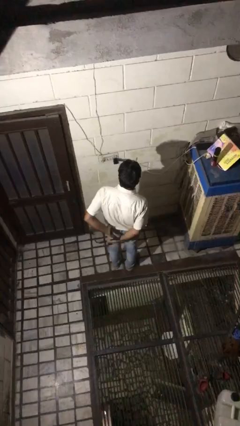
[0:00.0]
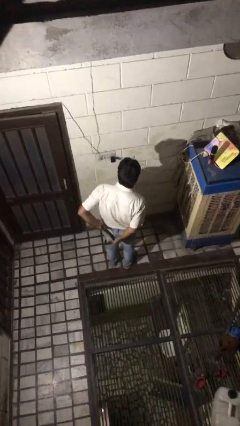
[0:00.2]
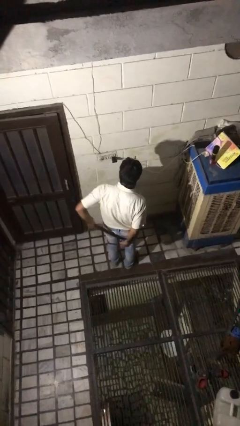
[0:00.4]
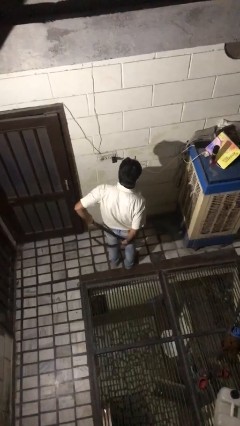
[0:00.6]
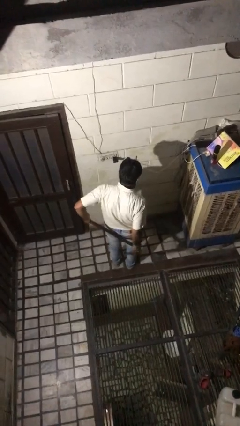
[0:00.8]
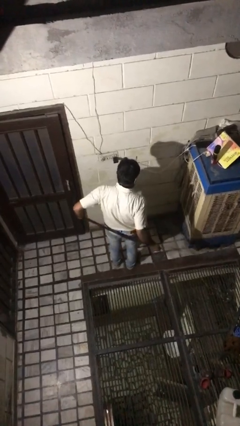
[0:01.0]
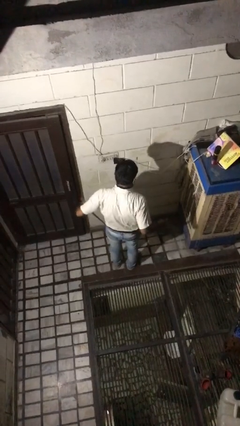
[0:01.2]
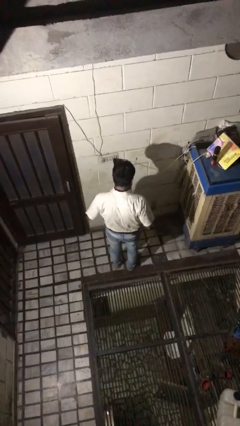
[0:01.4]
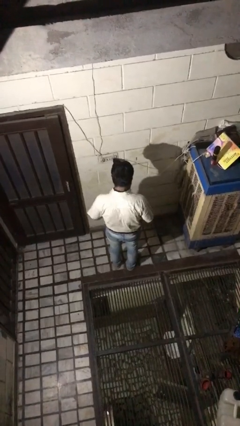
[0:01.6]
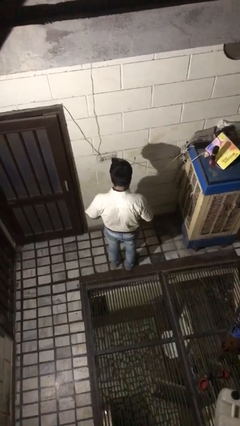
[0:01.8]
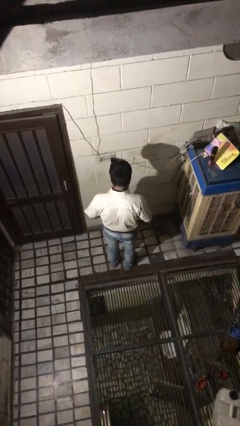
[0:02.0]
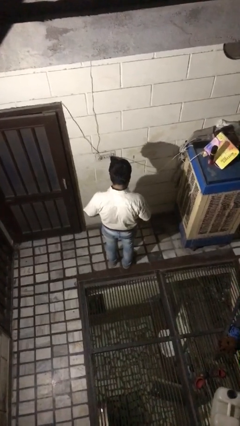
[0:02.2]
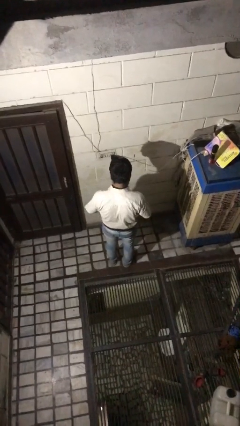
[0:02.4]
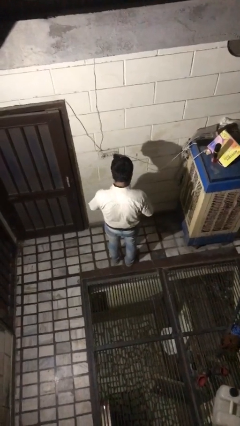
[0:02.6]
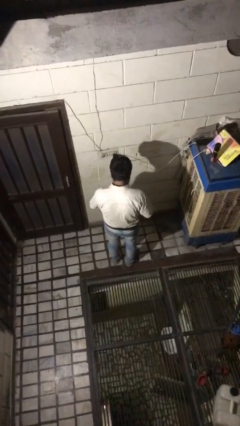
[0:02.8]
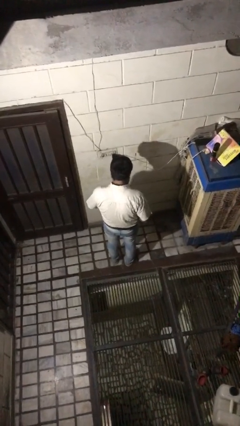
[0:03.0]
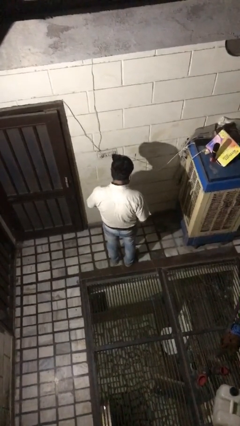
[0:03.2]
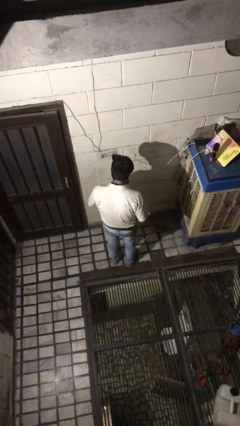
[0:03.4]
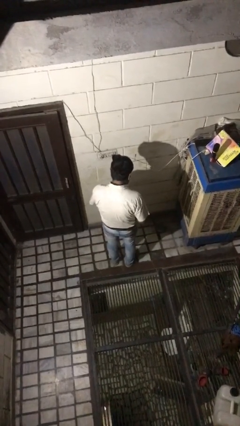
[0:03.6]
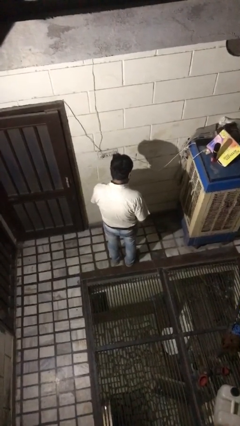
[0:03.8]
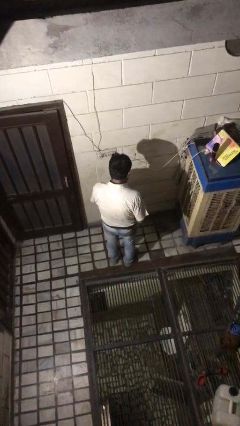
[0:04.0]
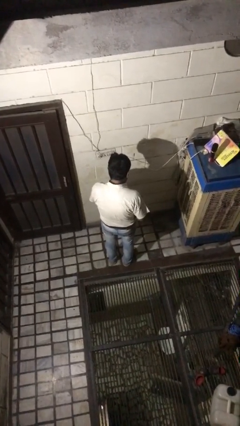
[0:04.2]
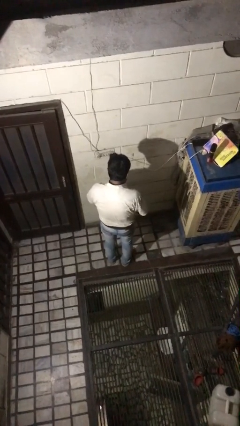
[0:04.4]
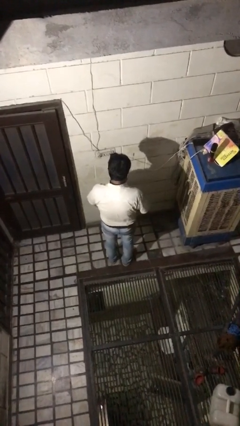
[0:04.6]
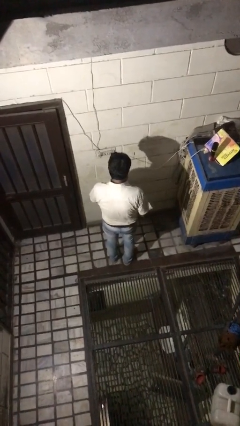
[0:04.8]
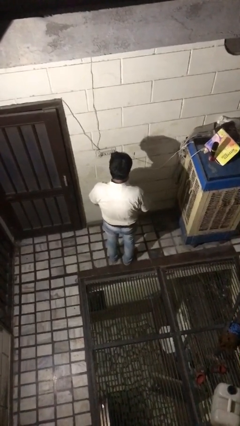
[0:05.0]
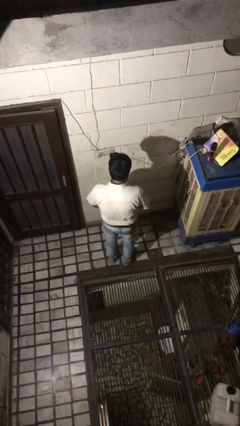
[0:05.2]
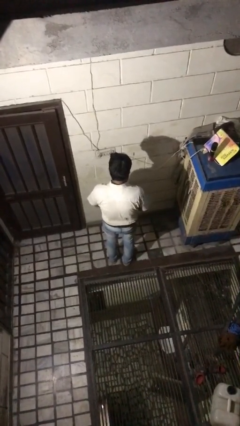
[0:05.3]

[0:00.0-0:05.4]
person puts on belt

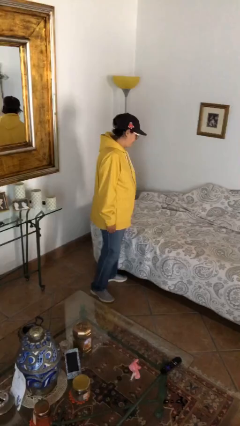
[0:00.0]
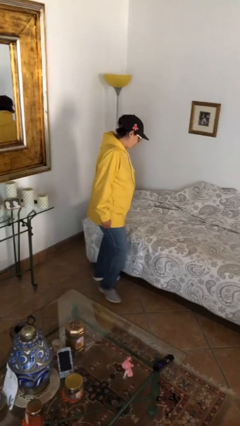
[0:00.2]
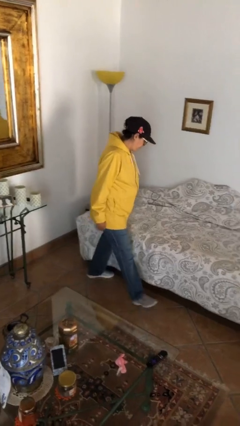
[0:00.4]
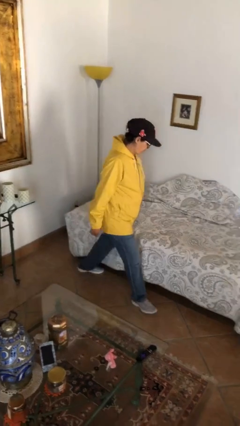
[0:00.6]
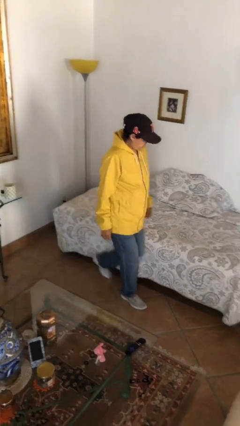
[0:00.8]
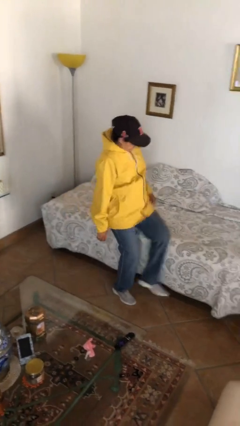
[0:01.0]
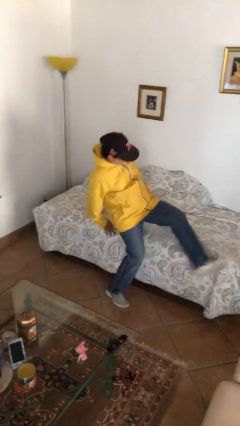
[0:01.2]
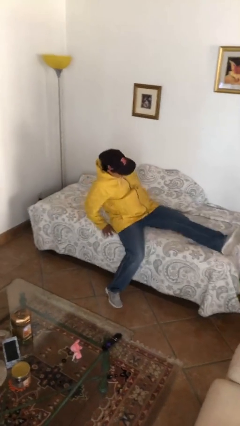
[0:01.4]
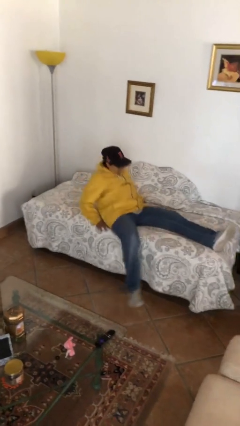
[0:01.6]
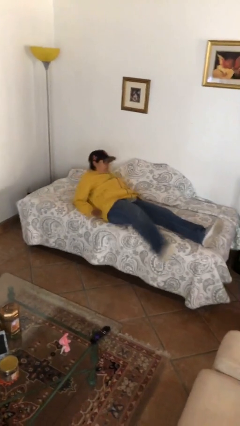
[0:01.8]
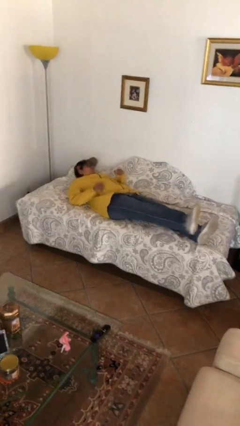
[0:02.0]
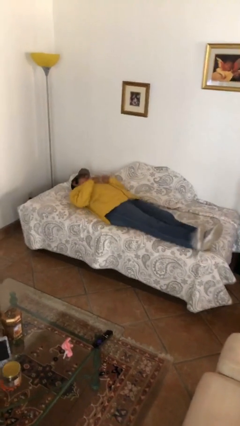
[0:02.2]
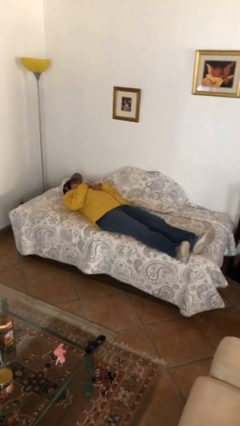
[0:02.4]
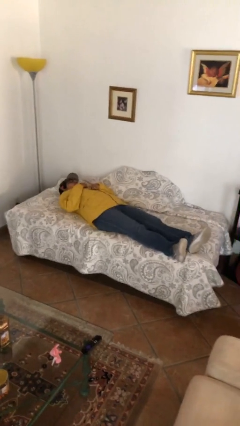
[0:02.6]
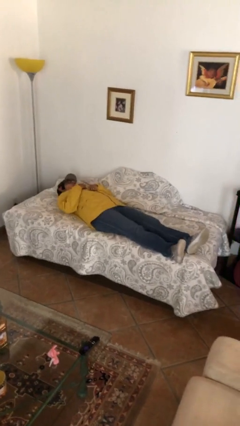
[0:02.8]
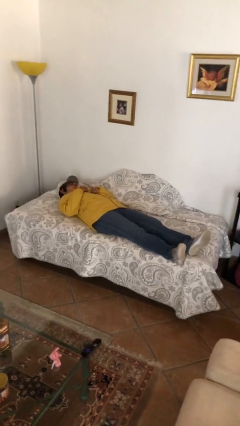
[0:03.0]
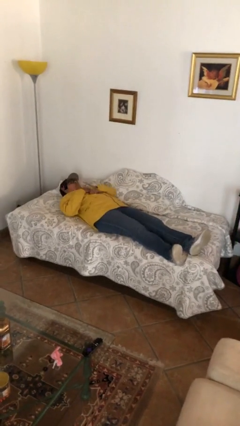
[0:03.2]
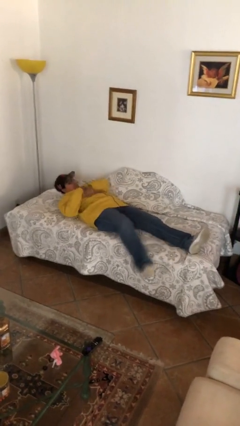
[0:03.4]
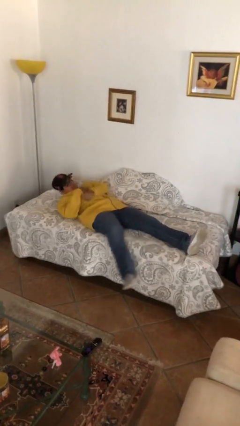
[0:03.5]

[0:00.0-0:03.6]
person lies down on bed

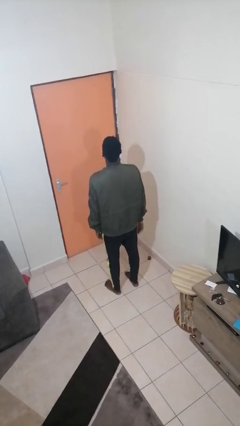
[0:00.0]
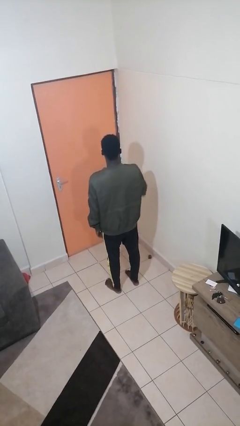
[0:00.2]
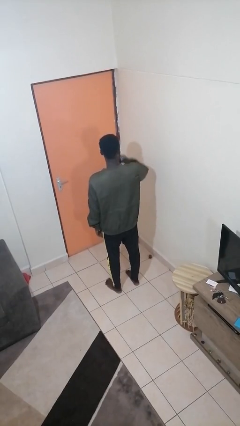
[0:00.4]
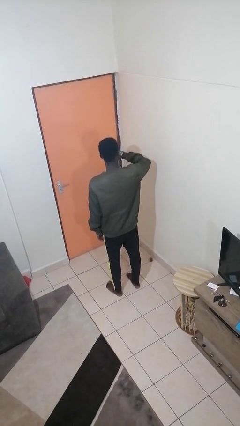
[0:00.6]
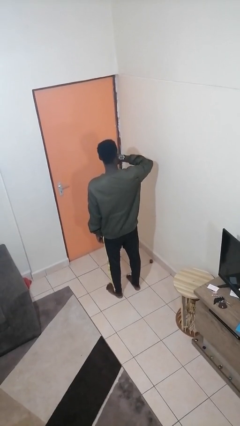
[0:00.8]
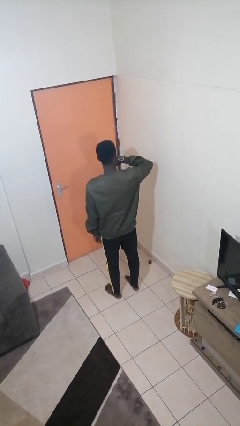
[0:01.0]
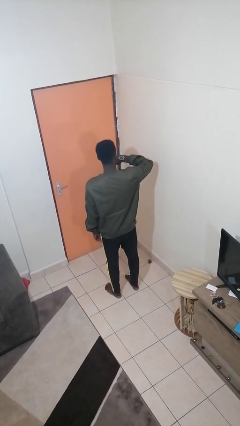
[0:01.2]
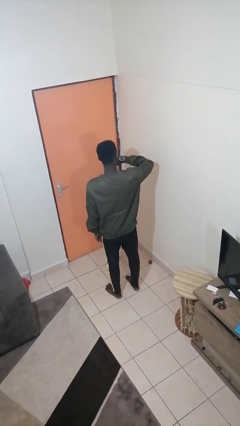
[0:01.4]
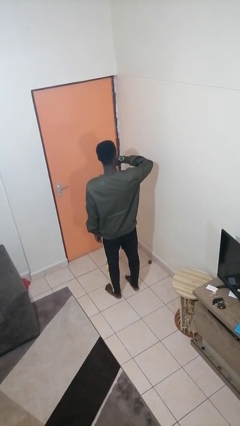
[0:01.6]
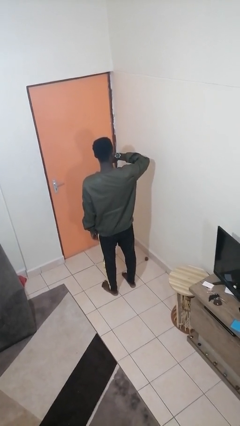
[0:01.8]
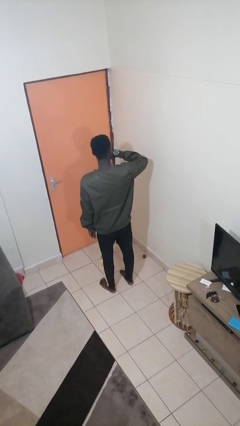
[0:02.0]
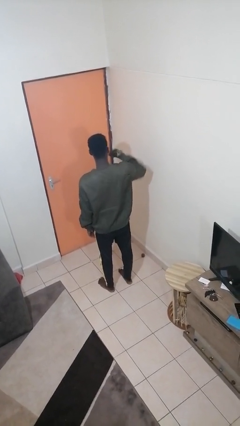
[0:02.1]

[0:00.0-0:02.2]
person looks at wristwatch

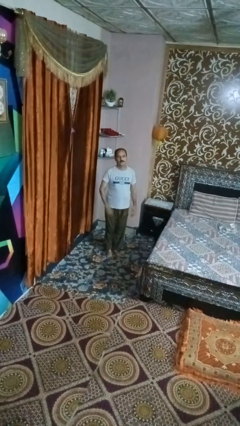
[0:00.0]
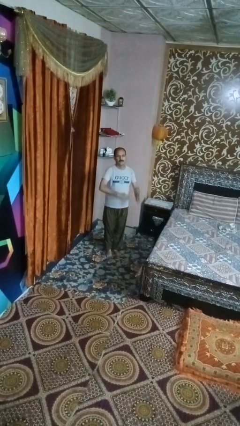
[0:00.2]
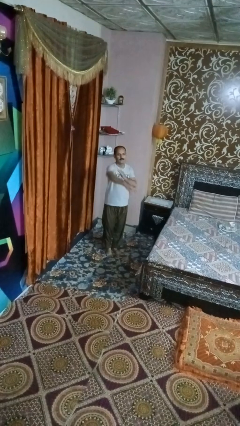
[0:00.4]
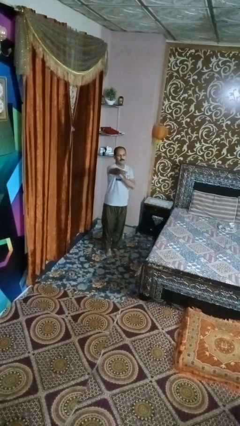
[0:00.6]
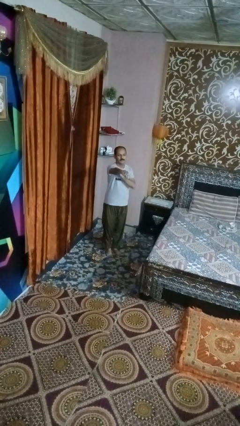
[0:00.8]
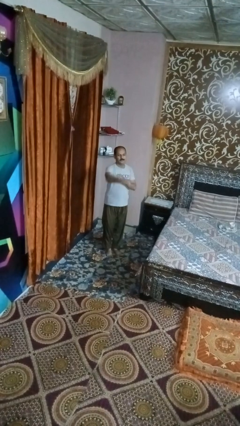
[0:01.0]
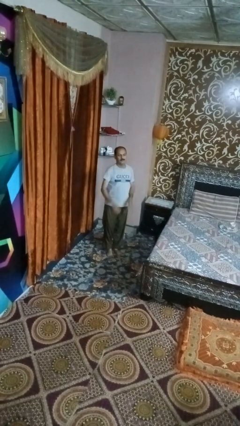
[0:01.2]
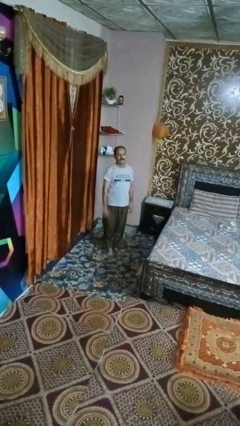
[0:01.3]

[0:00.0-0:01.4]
person karate chop

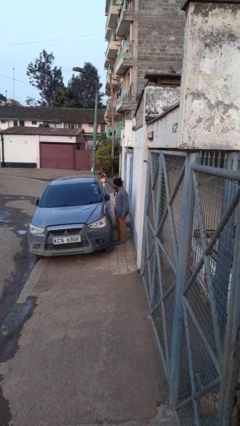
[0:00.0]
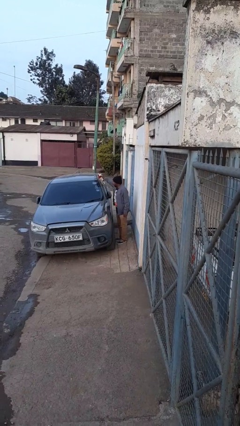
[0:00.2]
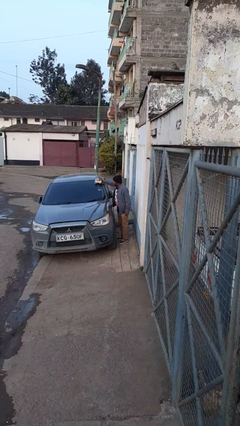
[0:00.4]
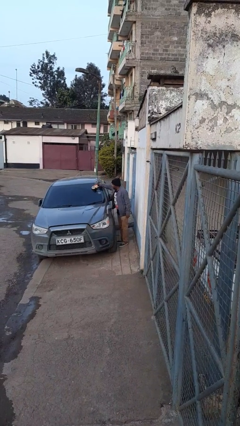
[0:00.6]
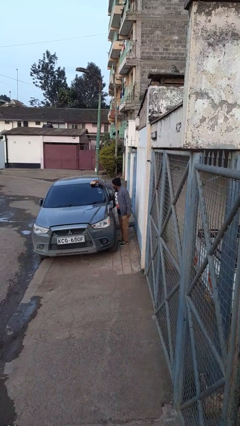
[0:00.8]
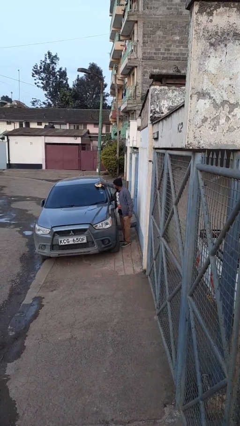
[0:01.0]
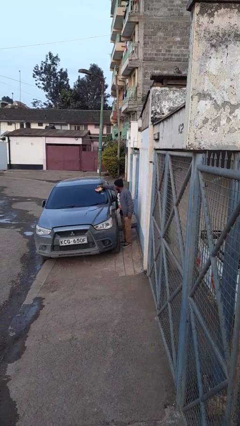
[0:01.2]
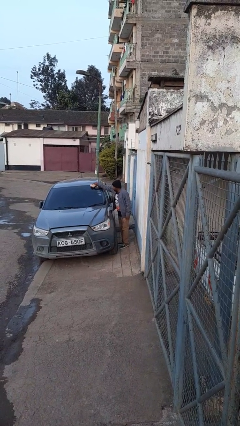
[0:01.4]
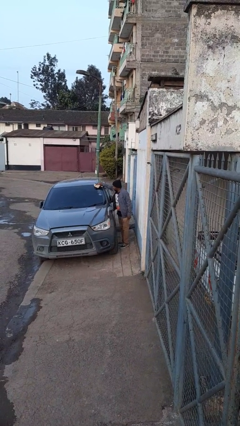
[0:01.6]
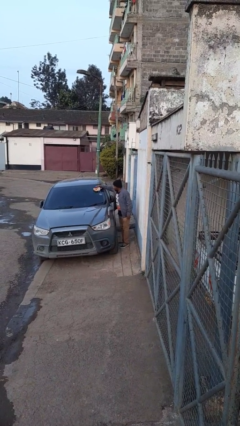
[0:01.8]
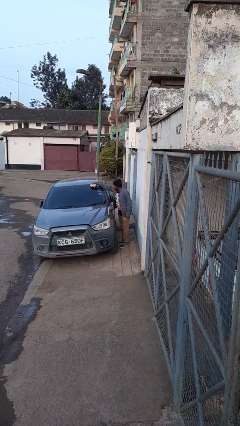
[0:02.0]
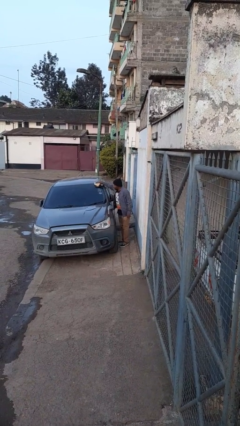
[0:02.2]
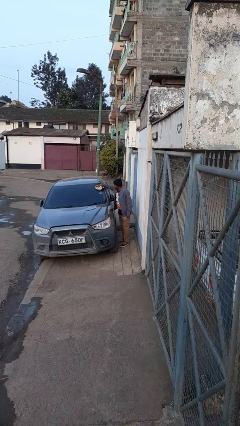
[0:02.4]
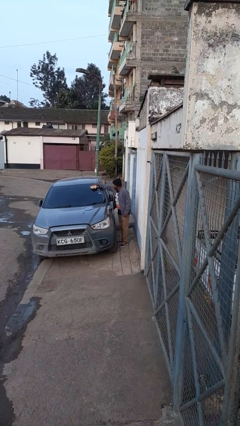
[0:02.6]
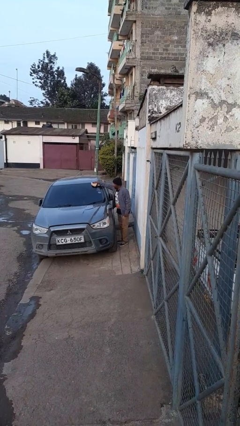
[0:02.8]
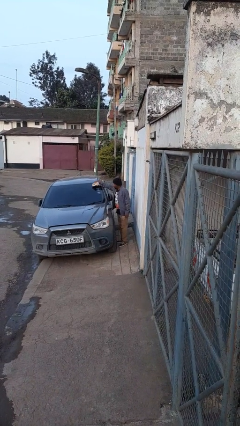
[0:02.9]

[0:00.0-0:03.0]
person polishes car with rag

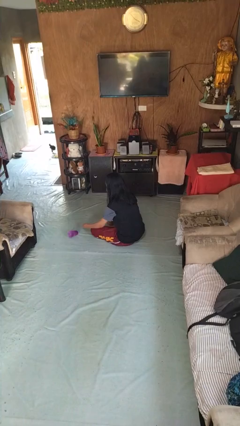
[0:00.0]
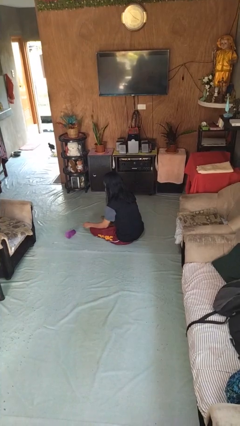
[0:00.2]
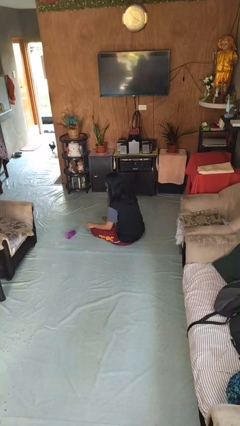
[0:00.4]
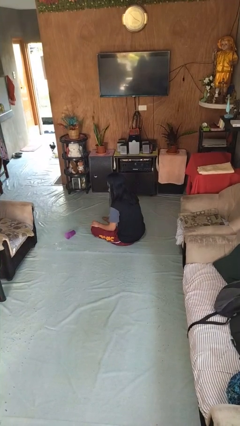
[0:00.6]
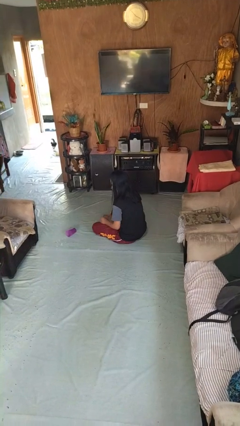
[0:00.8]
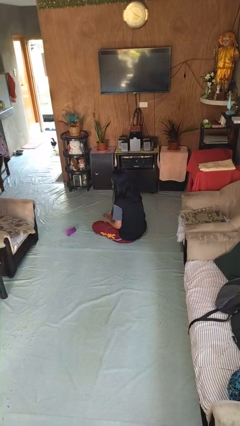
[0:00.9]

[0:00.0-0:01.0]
person spills on floor

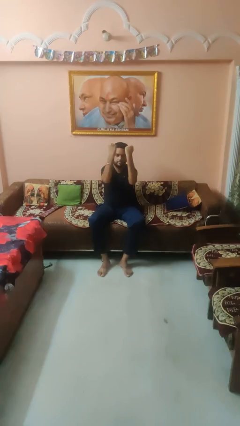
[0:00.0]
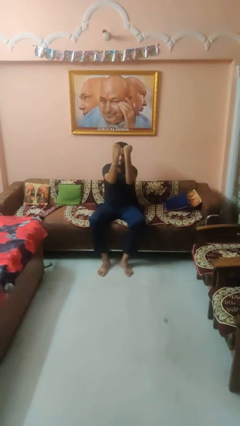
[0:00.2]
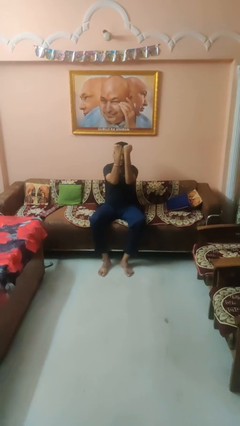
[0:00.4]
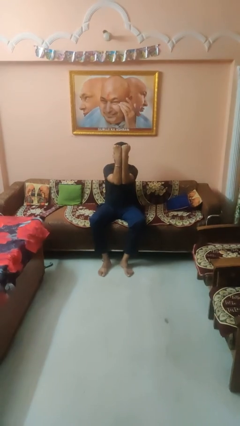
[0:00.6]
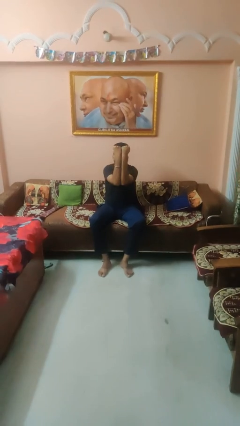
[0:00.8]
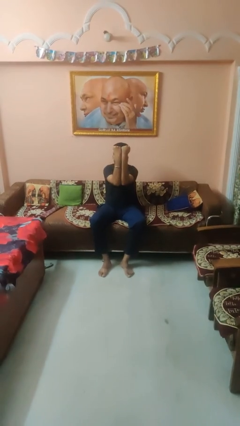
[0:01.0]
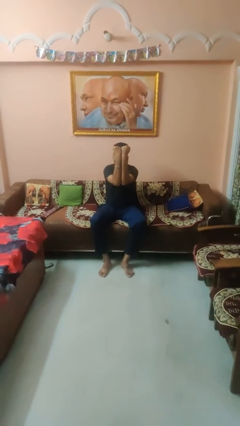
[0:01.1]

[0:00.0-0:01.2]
person gestures zoom out
